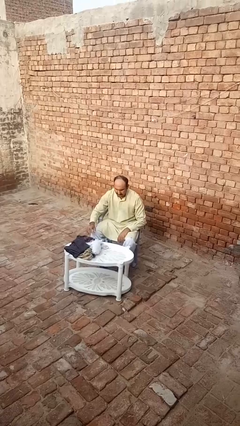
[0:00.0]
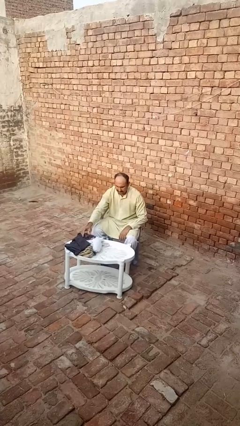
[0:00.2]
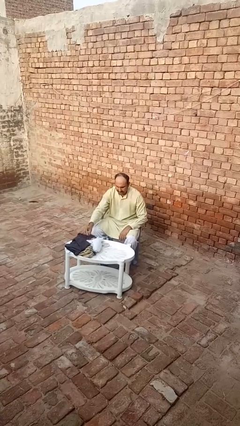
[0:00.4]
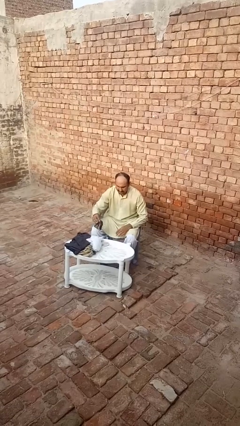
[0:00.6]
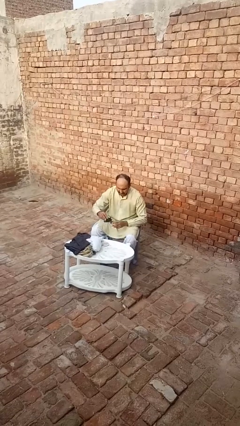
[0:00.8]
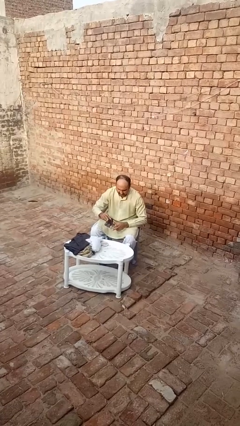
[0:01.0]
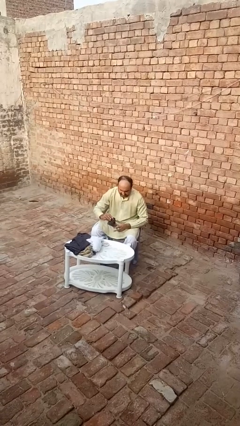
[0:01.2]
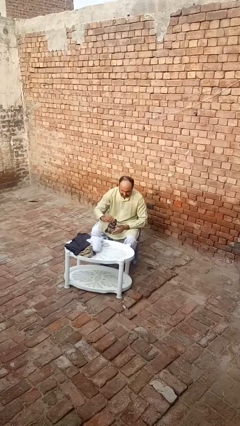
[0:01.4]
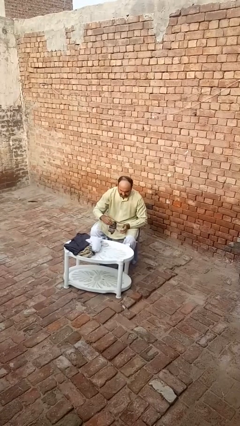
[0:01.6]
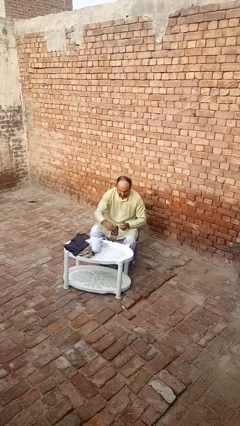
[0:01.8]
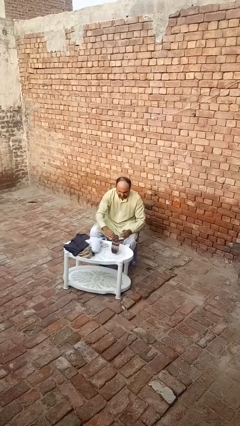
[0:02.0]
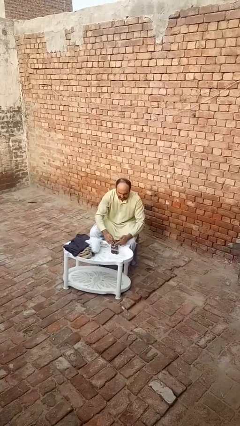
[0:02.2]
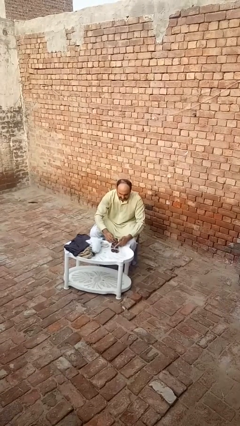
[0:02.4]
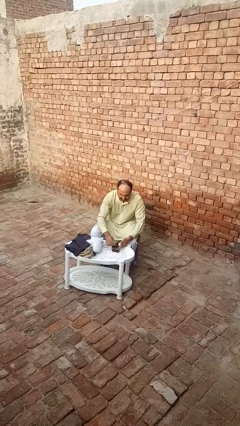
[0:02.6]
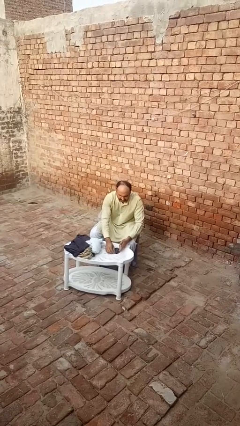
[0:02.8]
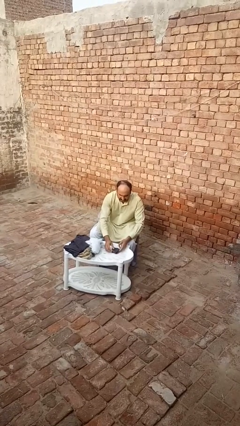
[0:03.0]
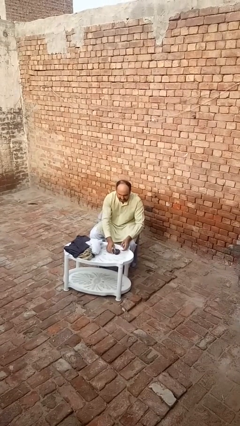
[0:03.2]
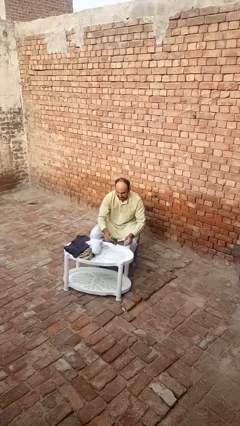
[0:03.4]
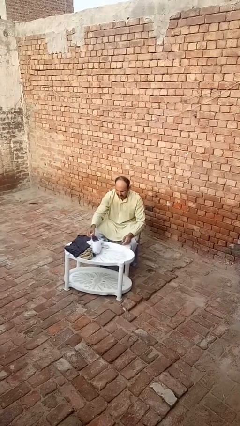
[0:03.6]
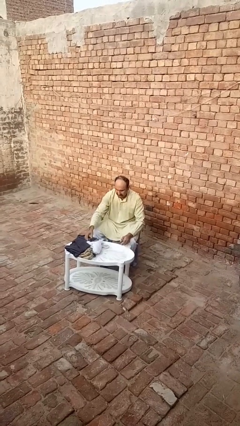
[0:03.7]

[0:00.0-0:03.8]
person folds socks

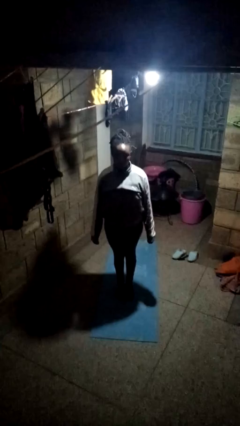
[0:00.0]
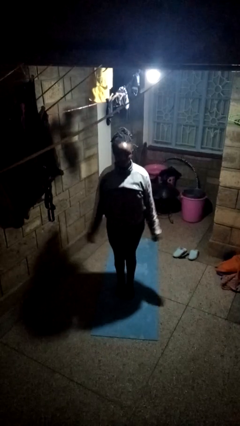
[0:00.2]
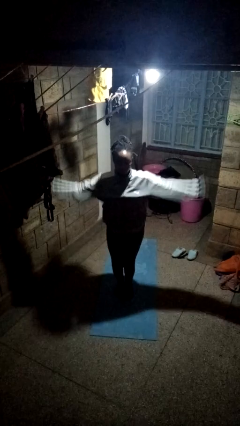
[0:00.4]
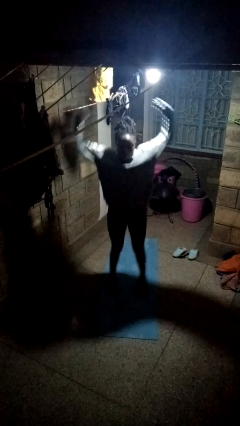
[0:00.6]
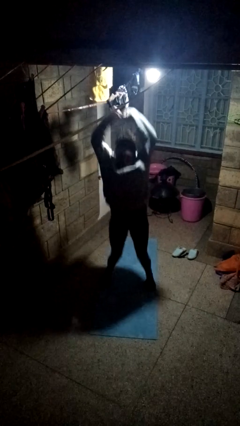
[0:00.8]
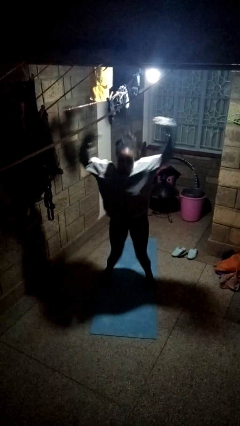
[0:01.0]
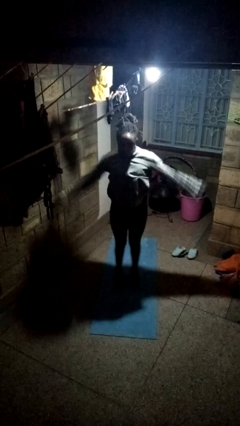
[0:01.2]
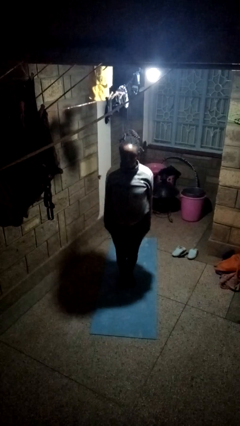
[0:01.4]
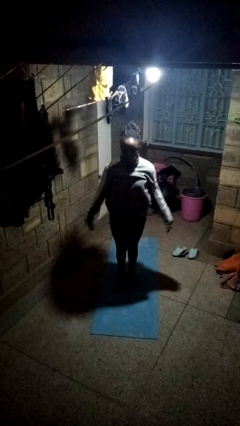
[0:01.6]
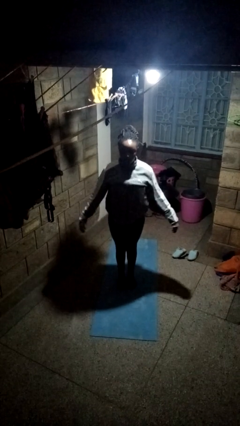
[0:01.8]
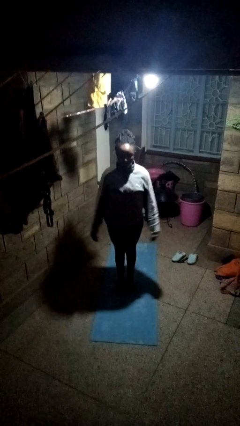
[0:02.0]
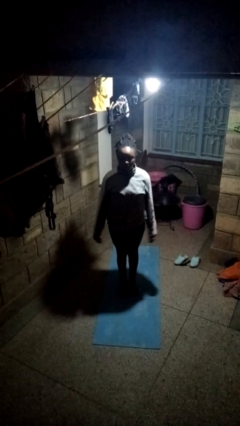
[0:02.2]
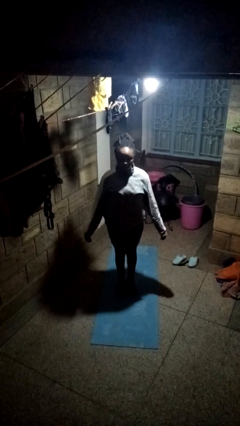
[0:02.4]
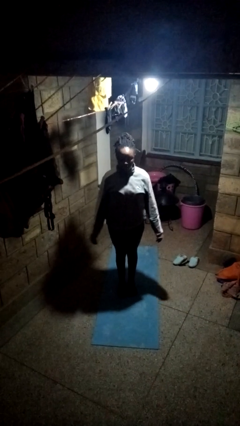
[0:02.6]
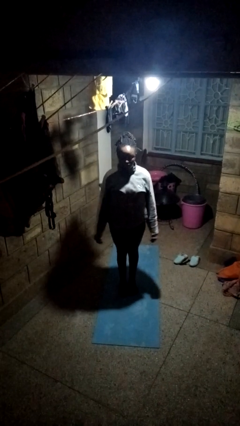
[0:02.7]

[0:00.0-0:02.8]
person exercises with jumping jacks

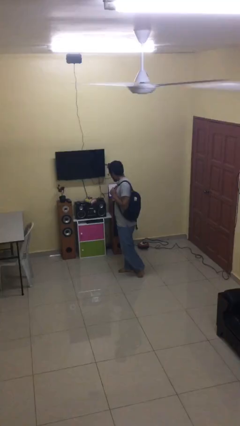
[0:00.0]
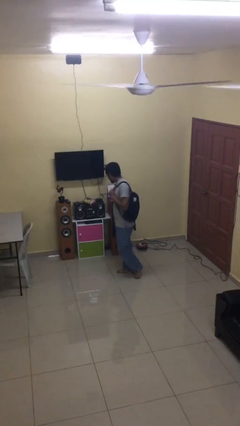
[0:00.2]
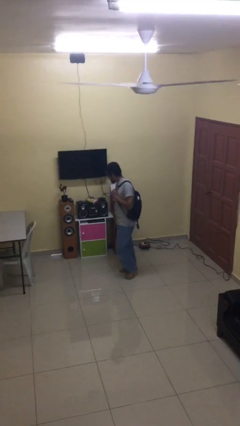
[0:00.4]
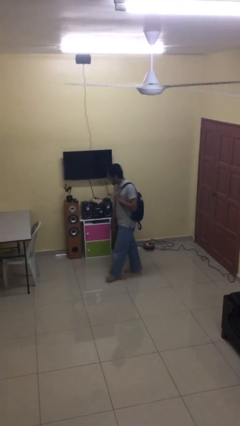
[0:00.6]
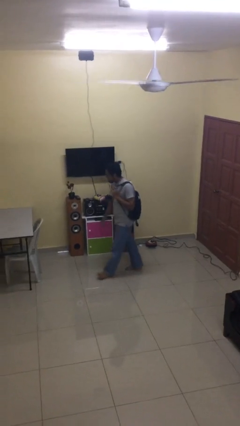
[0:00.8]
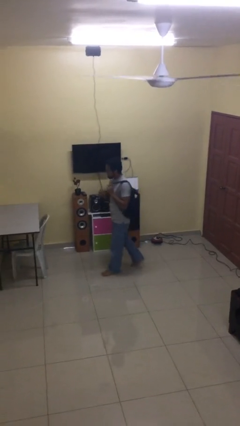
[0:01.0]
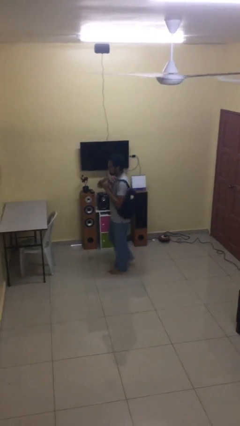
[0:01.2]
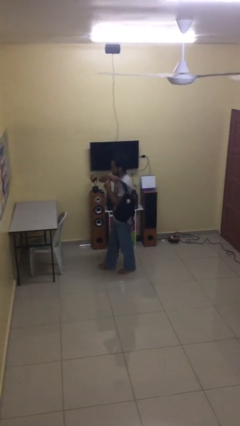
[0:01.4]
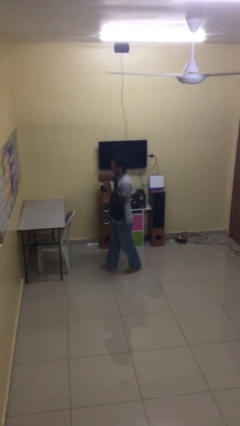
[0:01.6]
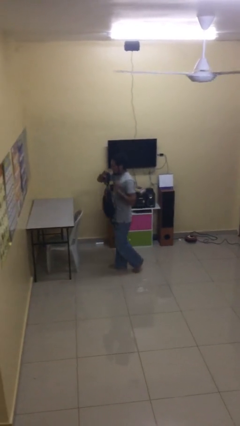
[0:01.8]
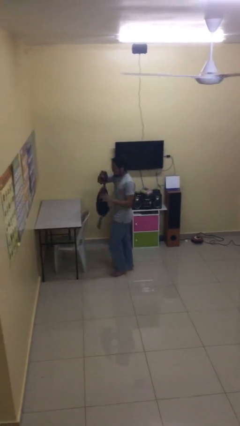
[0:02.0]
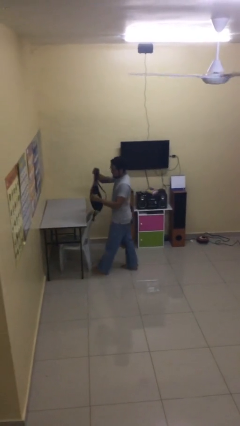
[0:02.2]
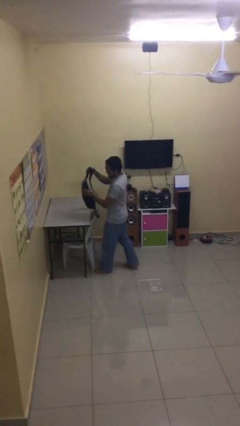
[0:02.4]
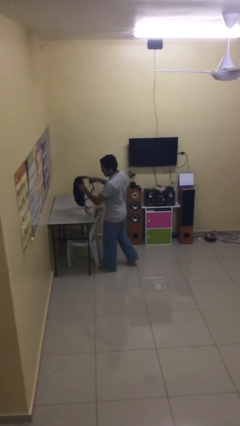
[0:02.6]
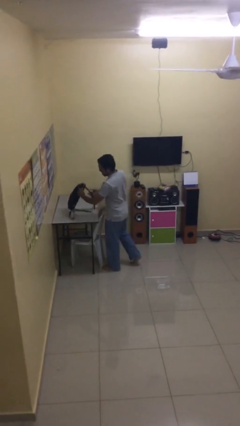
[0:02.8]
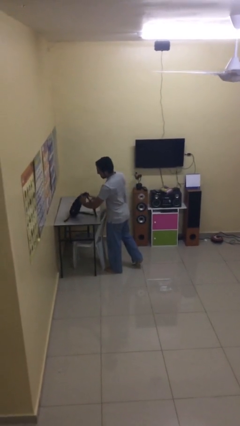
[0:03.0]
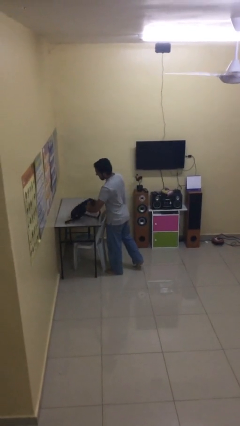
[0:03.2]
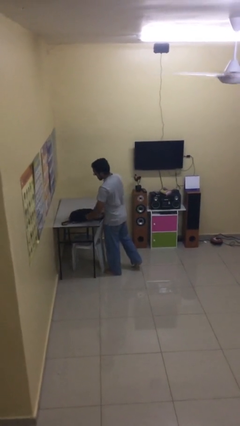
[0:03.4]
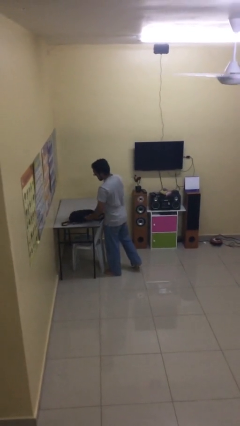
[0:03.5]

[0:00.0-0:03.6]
person puts down object on table

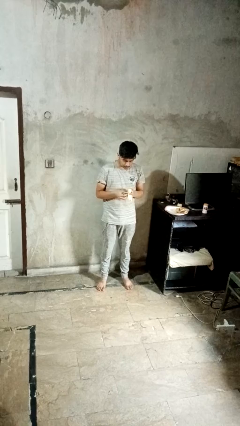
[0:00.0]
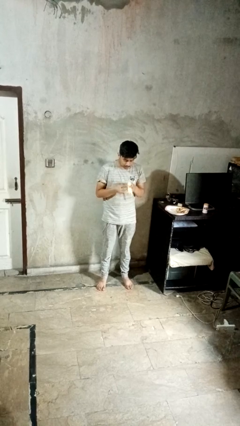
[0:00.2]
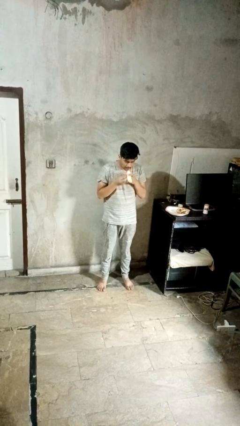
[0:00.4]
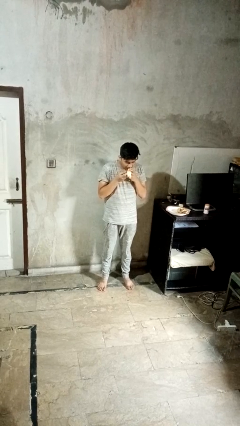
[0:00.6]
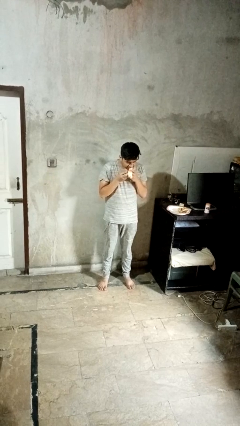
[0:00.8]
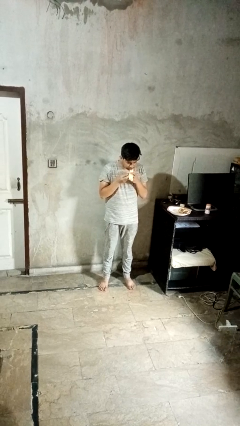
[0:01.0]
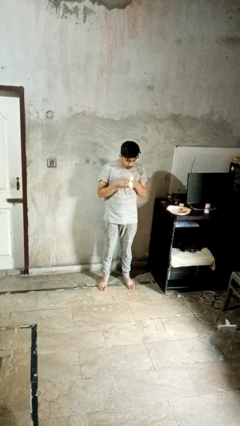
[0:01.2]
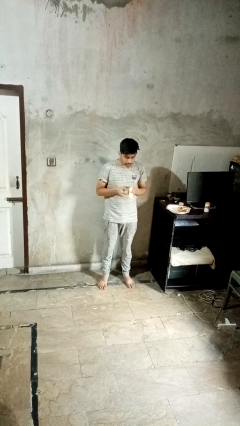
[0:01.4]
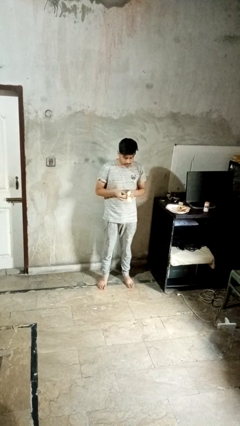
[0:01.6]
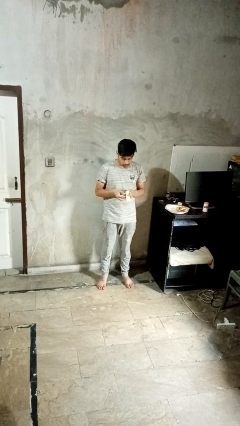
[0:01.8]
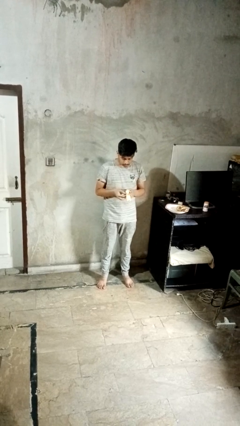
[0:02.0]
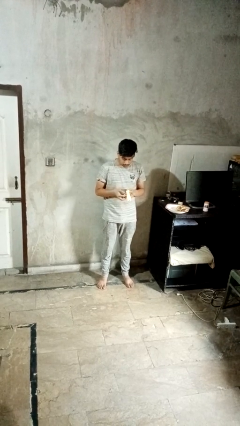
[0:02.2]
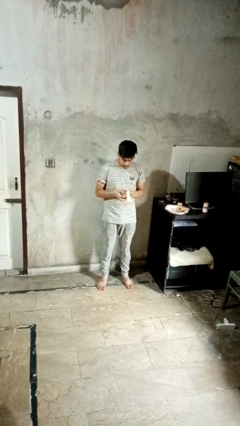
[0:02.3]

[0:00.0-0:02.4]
person eats banana

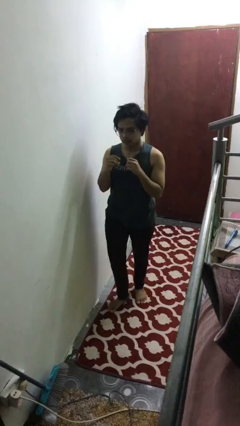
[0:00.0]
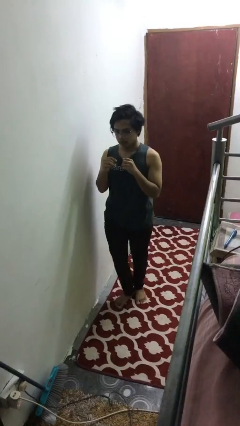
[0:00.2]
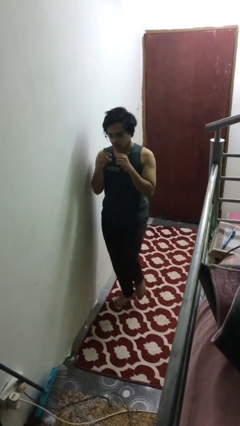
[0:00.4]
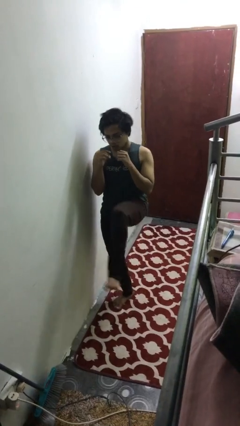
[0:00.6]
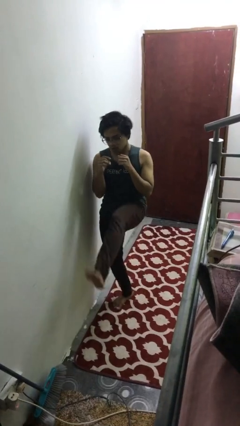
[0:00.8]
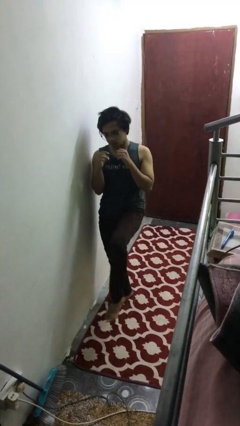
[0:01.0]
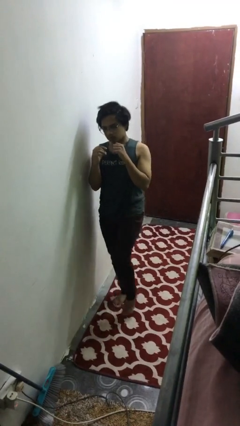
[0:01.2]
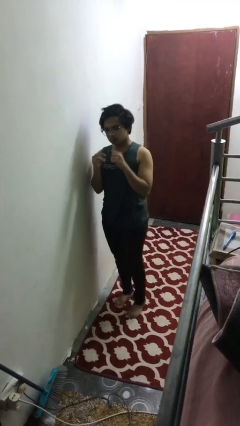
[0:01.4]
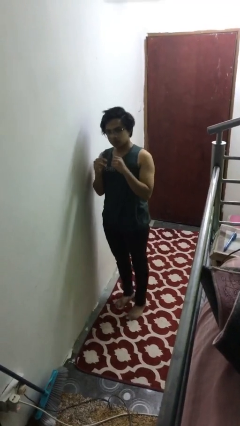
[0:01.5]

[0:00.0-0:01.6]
person karate kicks

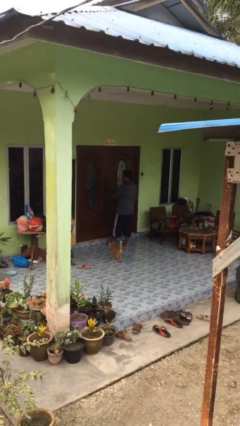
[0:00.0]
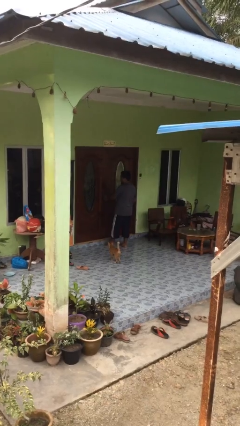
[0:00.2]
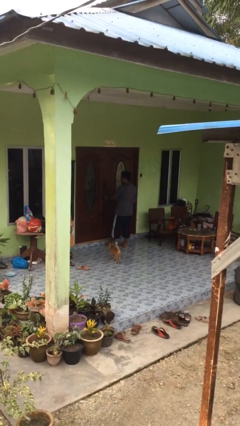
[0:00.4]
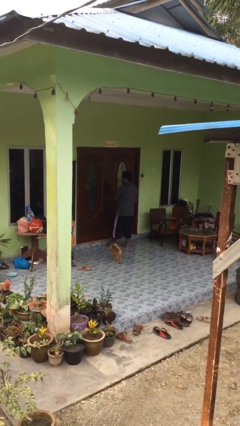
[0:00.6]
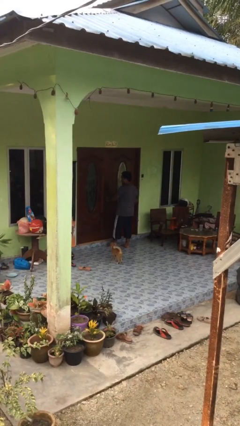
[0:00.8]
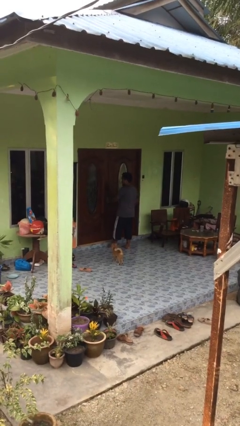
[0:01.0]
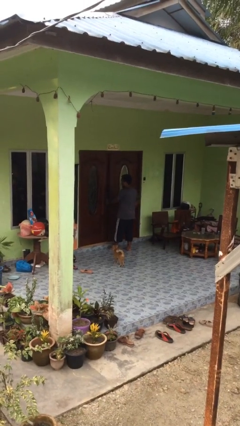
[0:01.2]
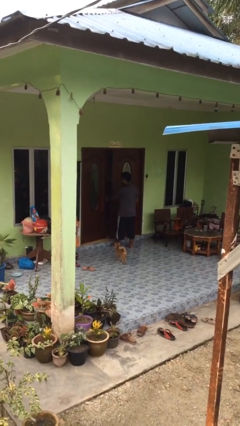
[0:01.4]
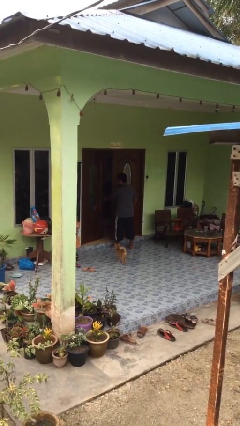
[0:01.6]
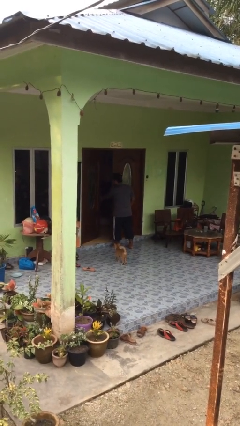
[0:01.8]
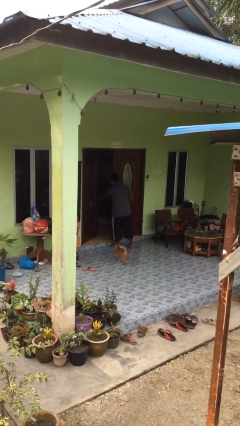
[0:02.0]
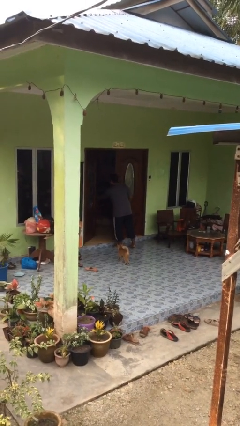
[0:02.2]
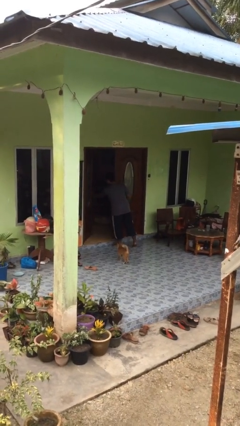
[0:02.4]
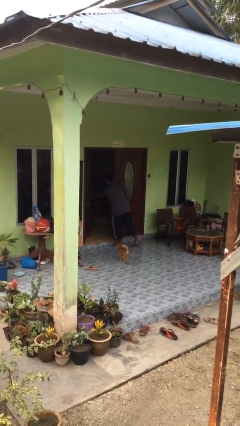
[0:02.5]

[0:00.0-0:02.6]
person opens facility door

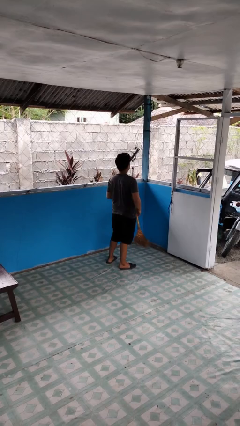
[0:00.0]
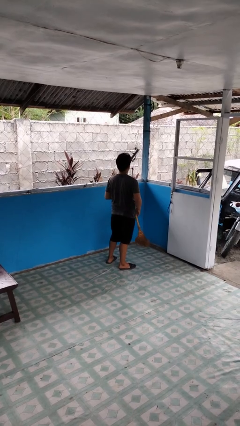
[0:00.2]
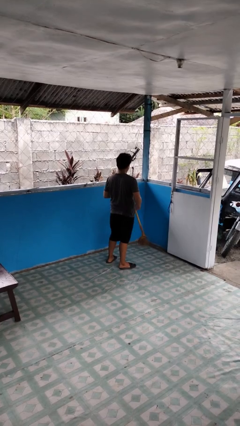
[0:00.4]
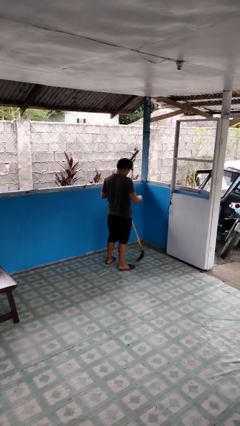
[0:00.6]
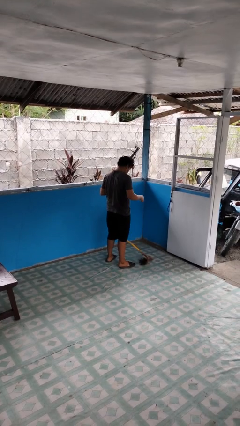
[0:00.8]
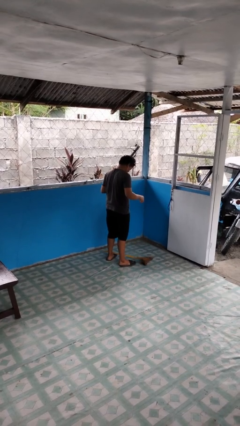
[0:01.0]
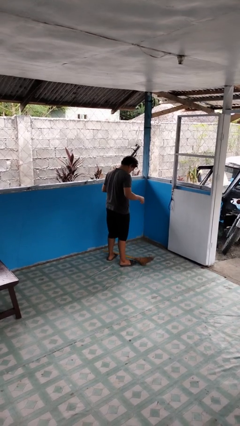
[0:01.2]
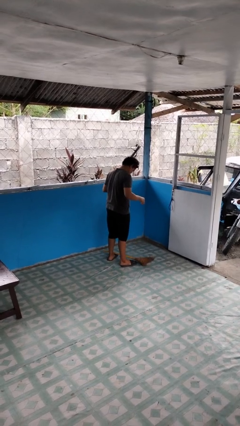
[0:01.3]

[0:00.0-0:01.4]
person drops object
